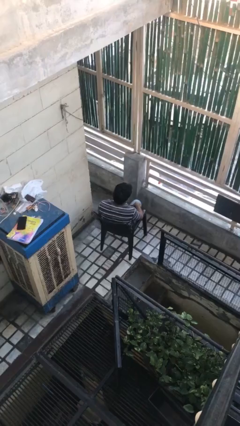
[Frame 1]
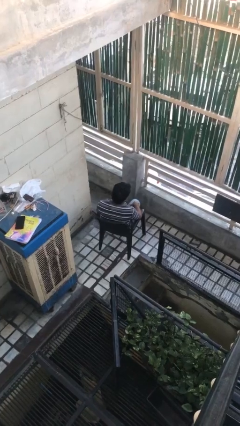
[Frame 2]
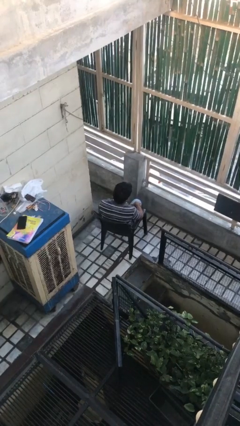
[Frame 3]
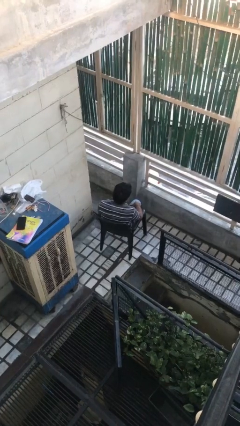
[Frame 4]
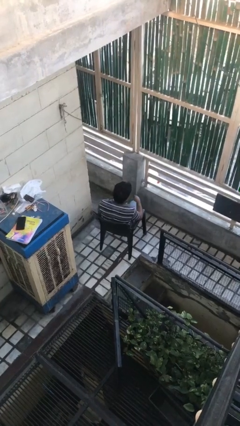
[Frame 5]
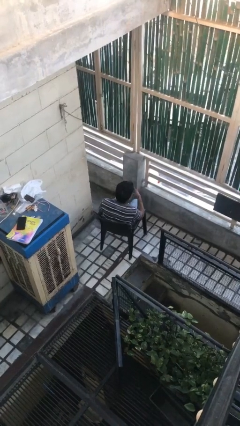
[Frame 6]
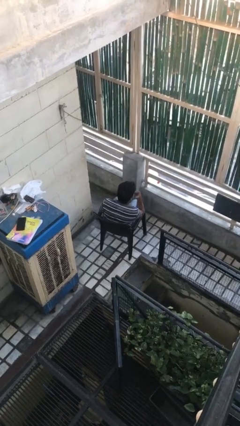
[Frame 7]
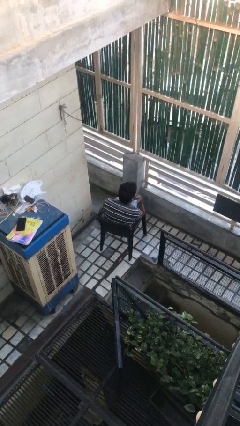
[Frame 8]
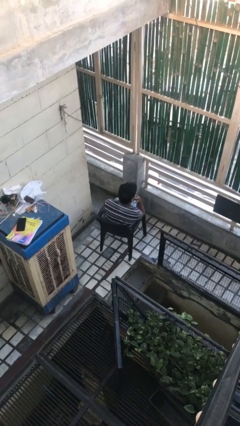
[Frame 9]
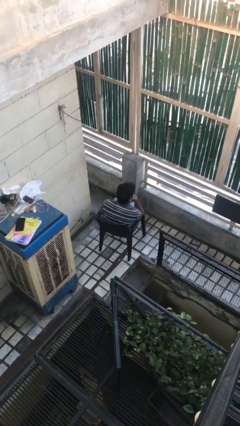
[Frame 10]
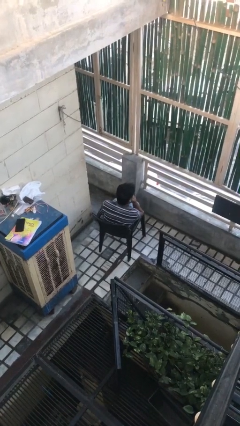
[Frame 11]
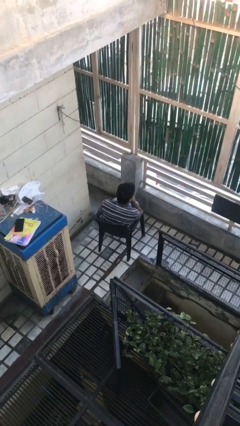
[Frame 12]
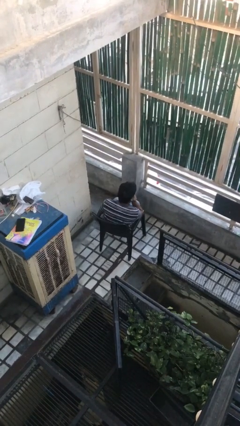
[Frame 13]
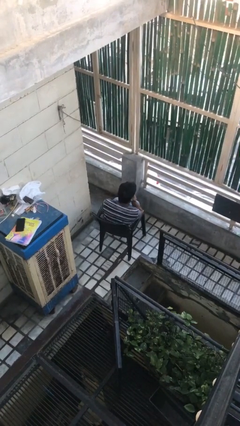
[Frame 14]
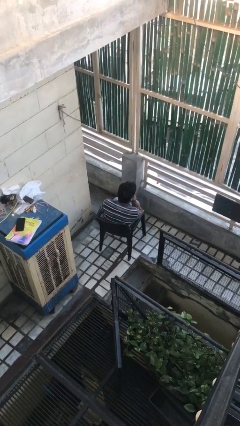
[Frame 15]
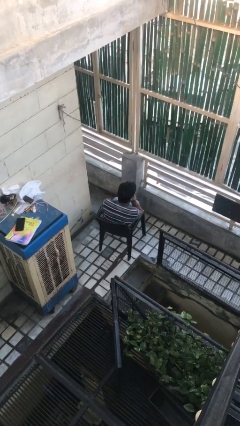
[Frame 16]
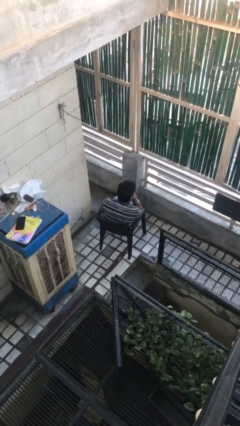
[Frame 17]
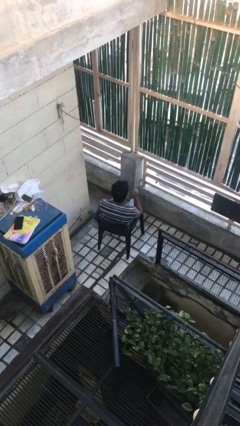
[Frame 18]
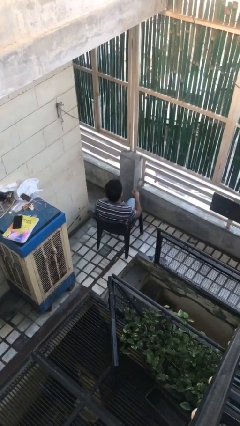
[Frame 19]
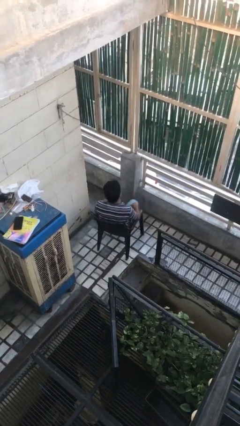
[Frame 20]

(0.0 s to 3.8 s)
person strokes chin

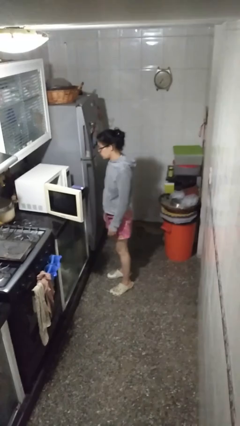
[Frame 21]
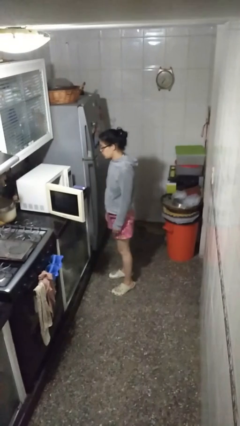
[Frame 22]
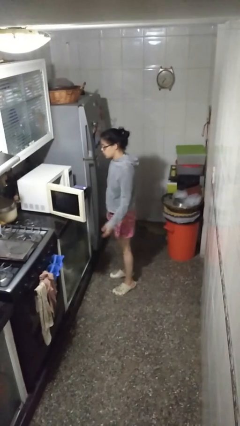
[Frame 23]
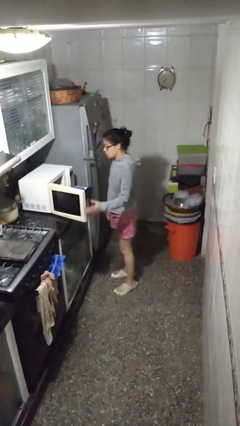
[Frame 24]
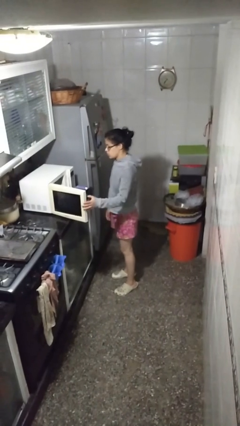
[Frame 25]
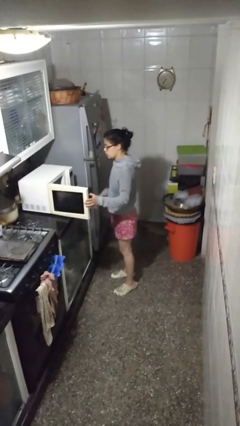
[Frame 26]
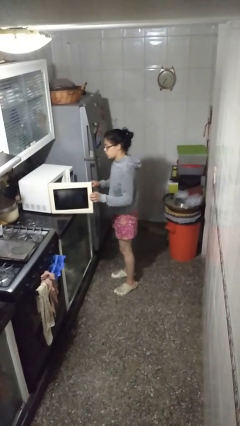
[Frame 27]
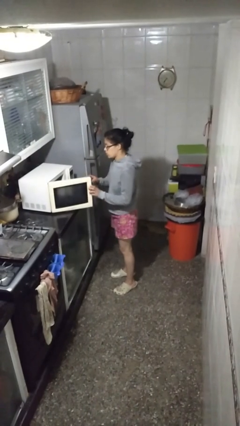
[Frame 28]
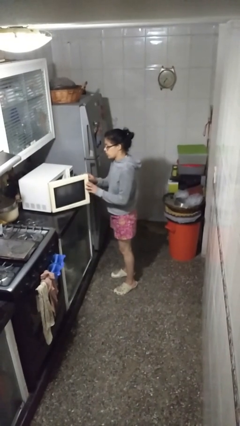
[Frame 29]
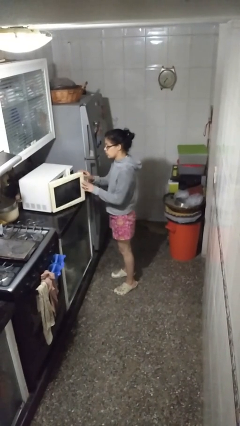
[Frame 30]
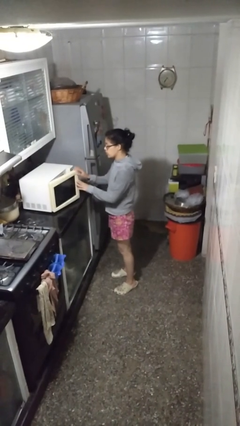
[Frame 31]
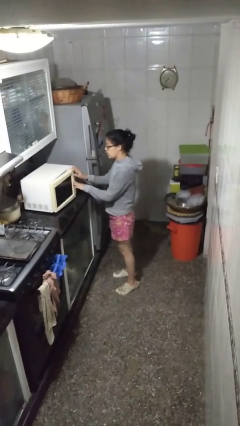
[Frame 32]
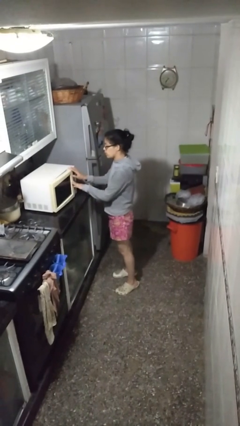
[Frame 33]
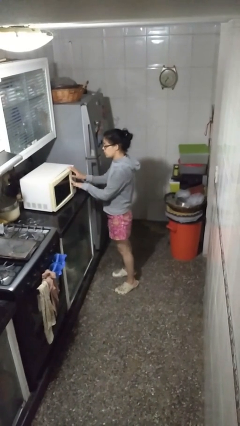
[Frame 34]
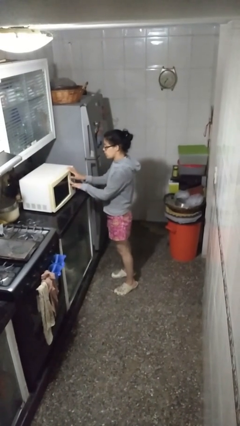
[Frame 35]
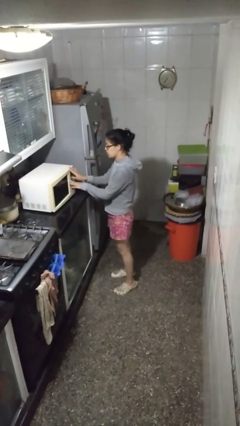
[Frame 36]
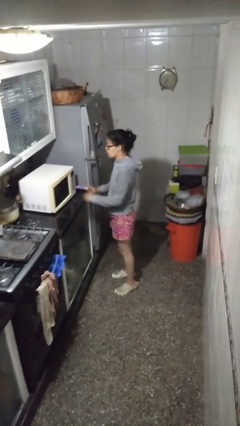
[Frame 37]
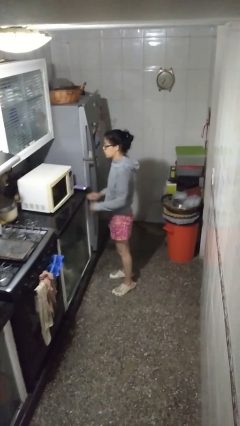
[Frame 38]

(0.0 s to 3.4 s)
person closes microwave

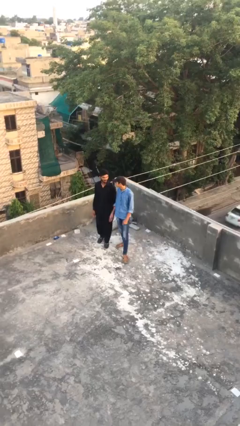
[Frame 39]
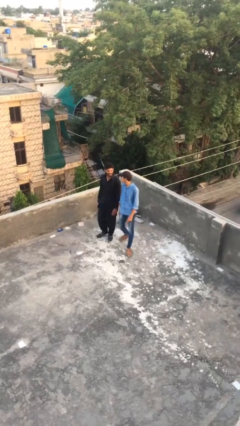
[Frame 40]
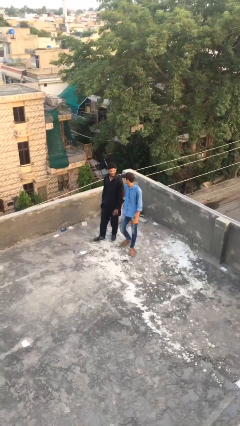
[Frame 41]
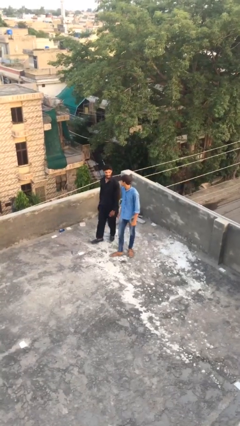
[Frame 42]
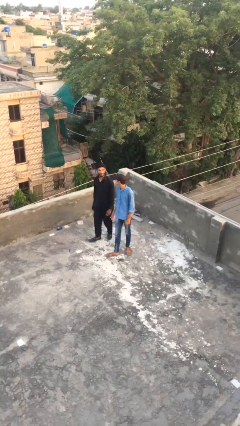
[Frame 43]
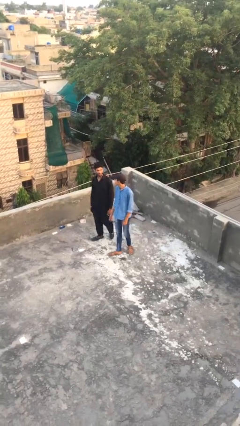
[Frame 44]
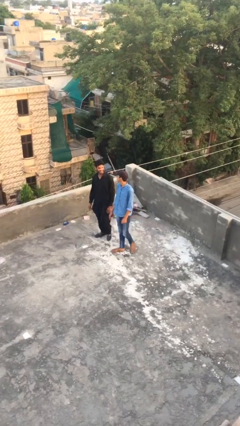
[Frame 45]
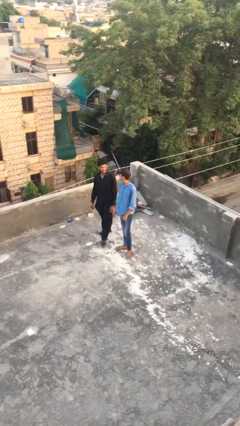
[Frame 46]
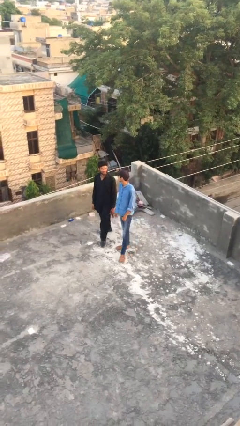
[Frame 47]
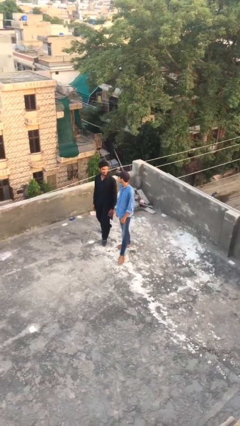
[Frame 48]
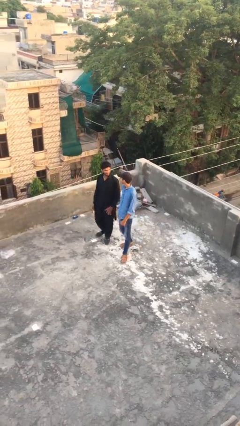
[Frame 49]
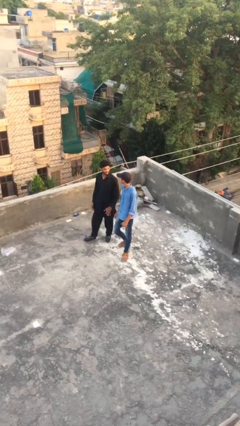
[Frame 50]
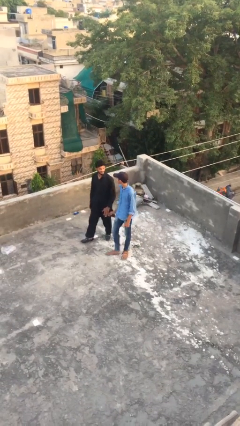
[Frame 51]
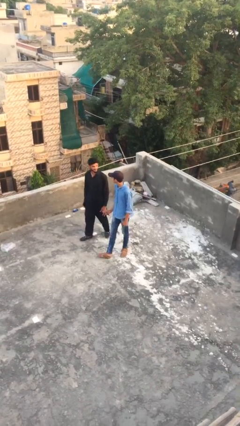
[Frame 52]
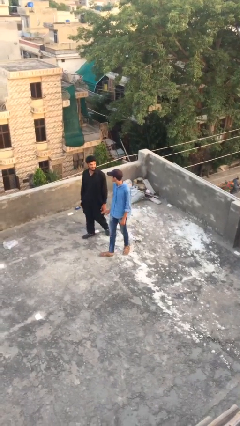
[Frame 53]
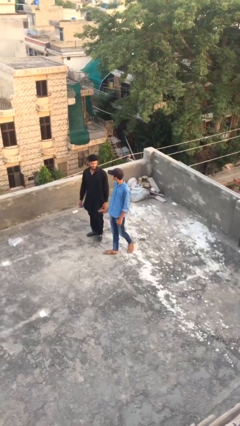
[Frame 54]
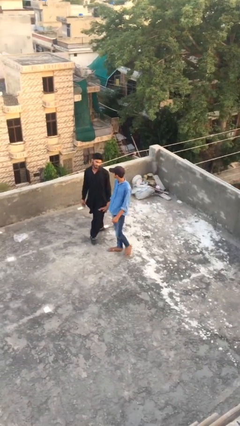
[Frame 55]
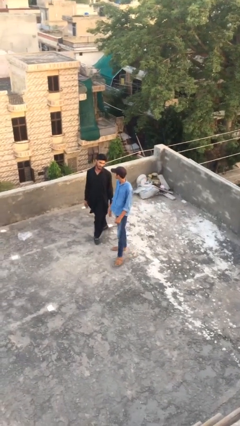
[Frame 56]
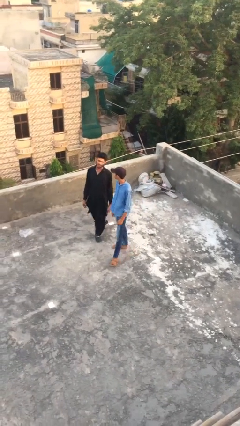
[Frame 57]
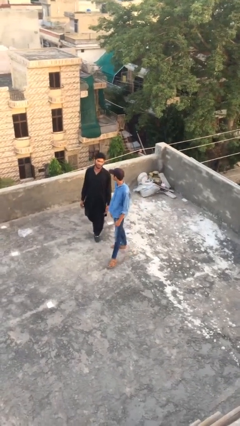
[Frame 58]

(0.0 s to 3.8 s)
person talks to person

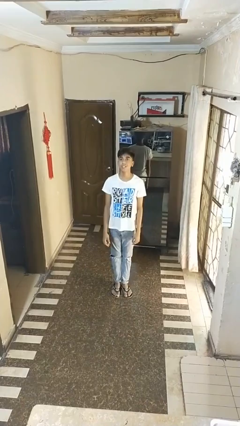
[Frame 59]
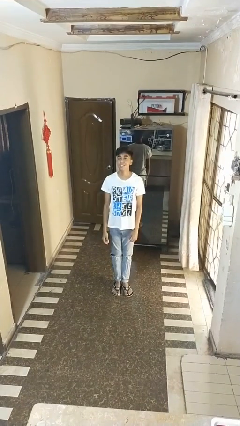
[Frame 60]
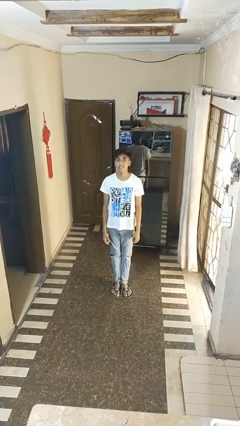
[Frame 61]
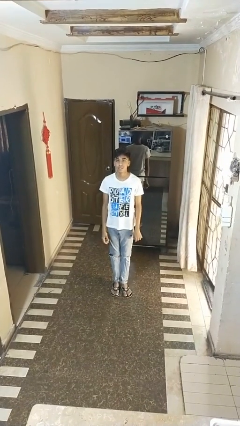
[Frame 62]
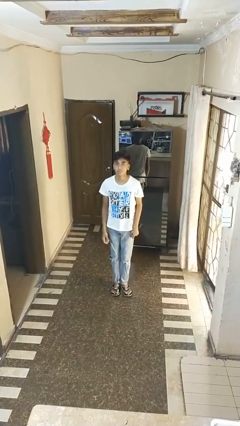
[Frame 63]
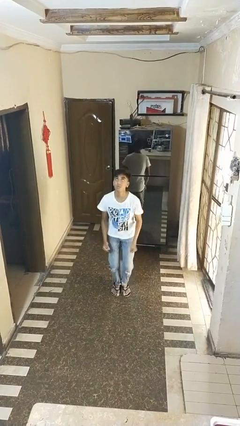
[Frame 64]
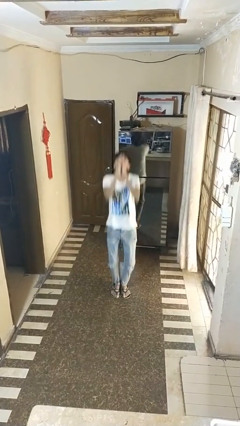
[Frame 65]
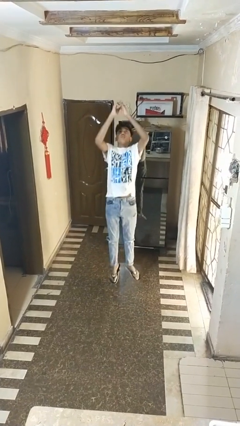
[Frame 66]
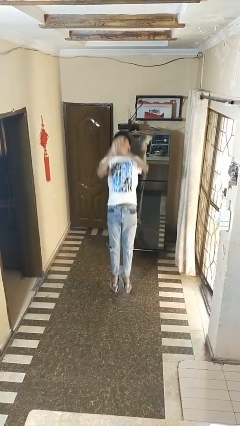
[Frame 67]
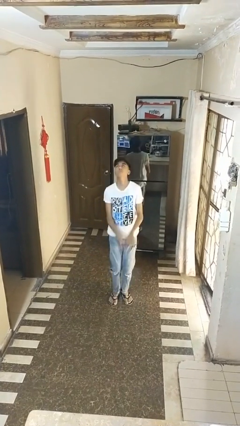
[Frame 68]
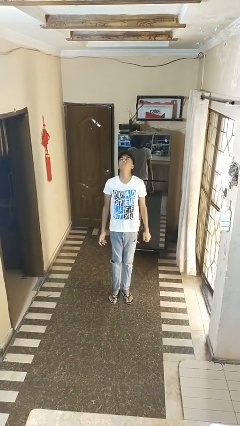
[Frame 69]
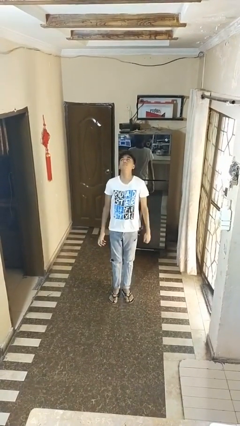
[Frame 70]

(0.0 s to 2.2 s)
person jumps

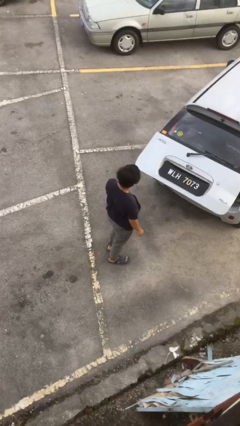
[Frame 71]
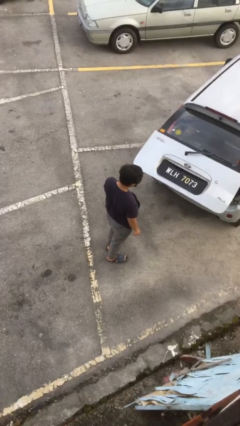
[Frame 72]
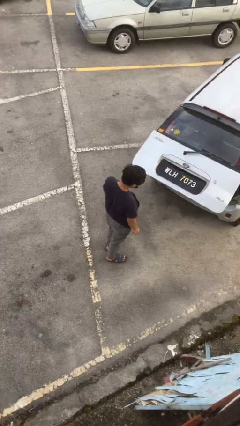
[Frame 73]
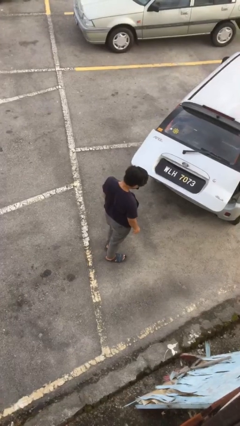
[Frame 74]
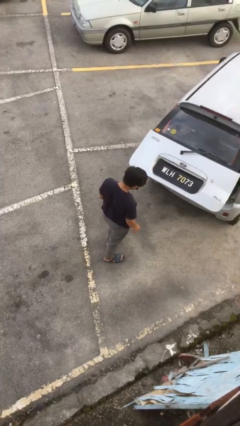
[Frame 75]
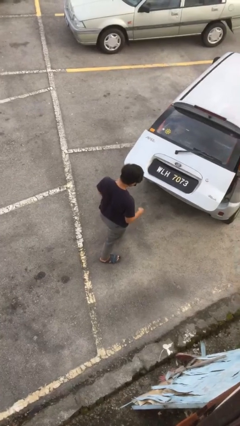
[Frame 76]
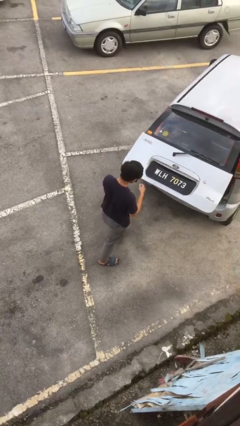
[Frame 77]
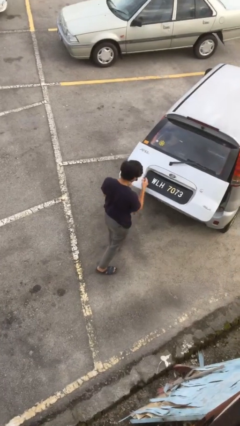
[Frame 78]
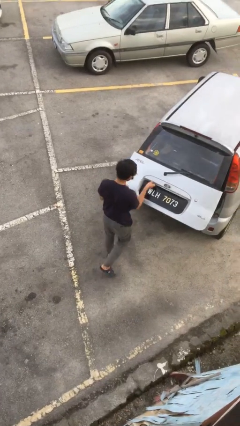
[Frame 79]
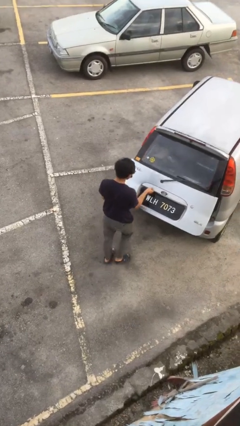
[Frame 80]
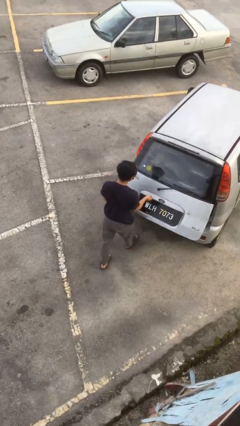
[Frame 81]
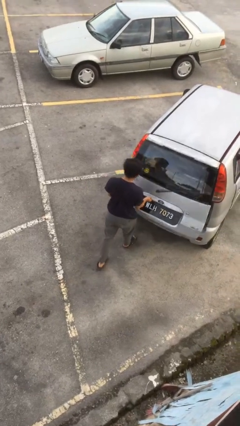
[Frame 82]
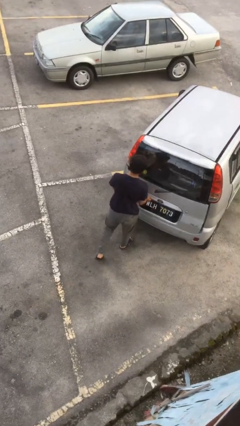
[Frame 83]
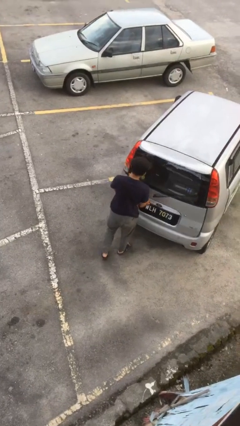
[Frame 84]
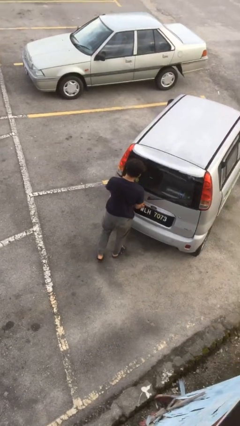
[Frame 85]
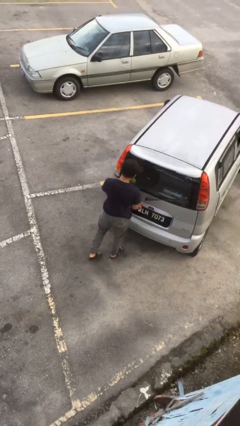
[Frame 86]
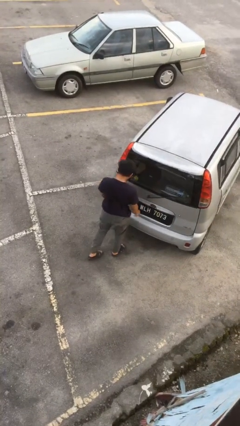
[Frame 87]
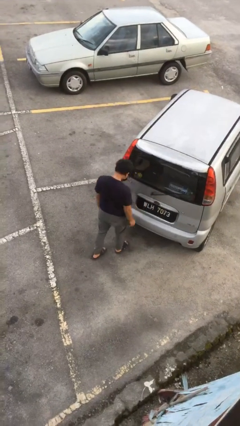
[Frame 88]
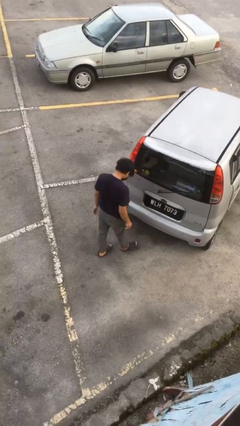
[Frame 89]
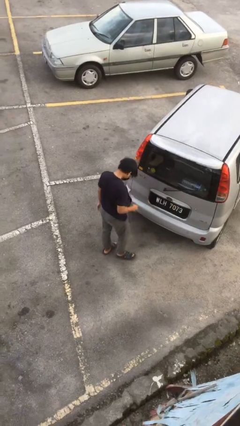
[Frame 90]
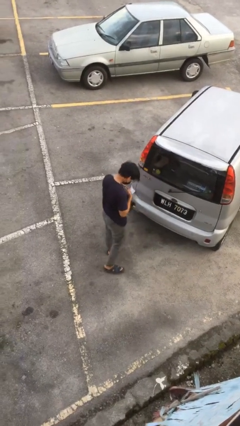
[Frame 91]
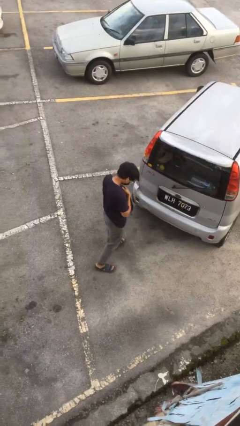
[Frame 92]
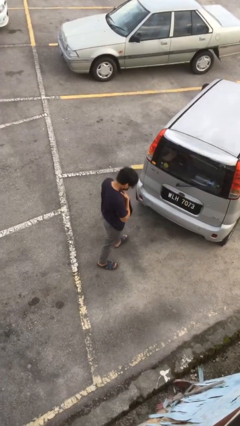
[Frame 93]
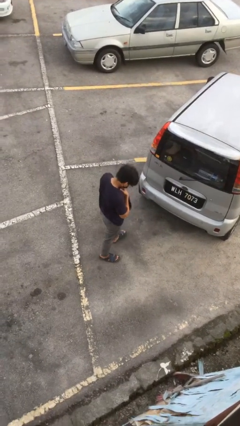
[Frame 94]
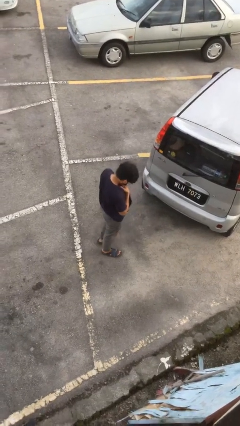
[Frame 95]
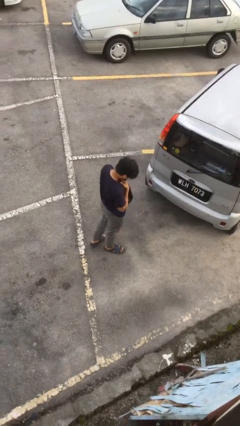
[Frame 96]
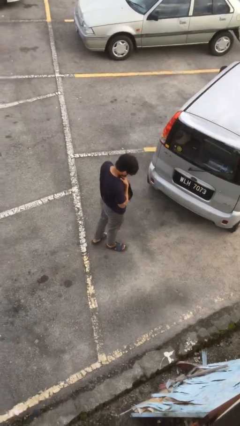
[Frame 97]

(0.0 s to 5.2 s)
person closes car trunk
